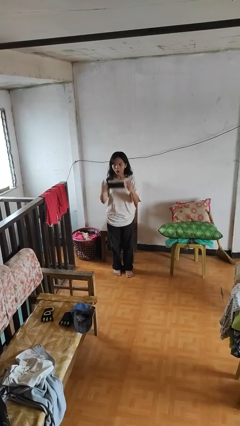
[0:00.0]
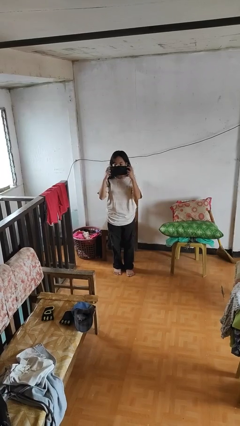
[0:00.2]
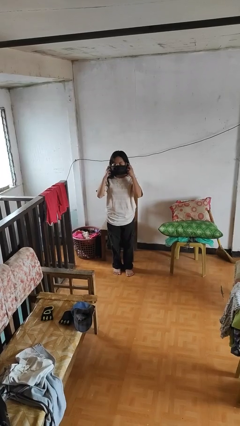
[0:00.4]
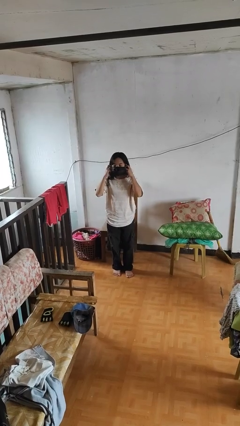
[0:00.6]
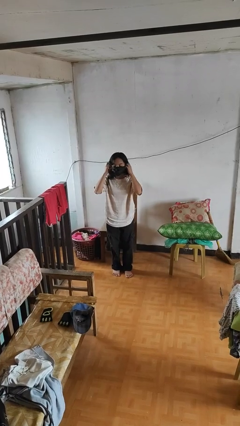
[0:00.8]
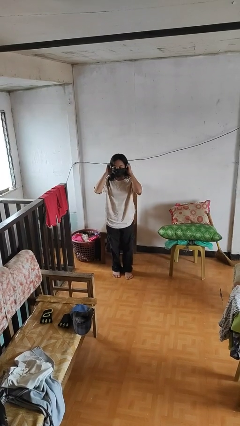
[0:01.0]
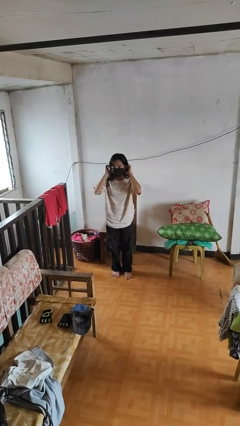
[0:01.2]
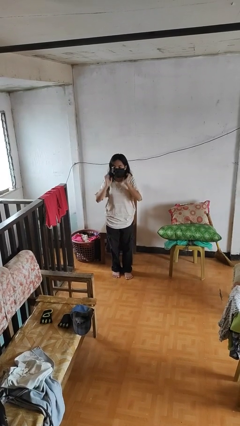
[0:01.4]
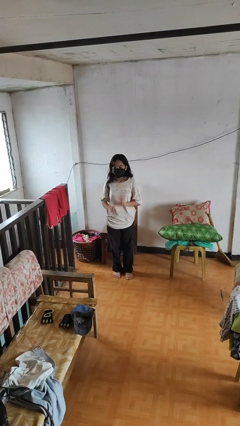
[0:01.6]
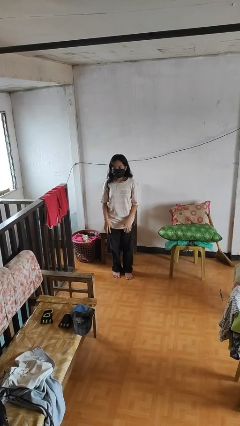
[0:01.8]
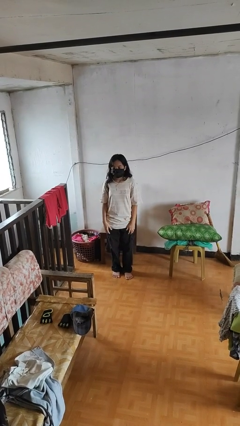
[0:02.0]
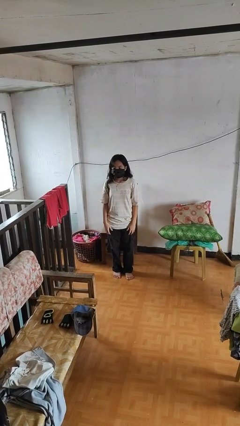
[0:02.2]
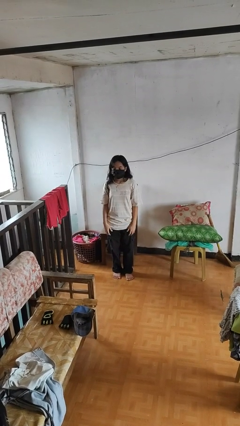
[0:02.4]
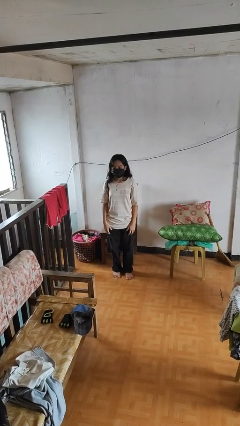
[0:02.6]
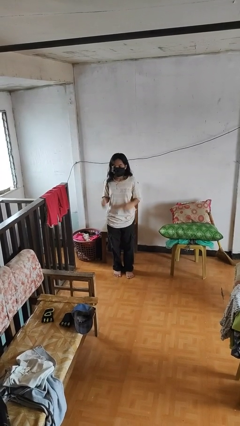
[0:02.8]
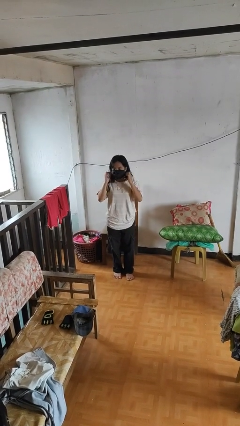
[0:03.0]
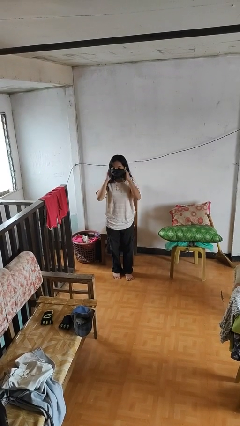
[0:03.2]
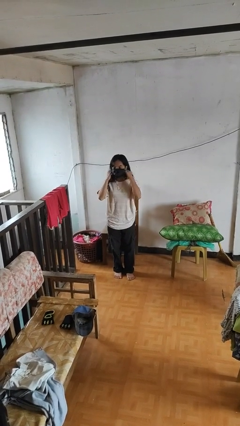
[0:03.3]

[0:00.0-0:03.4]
person puts on facemask

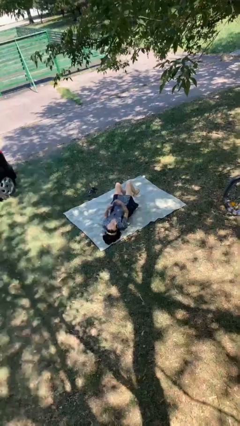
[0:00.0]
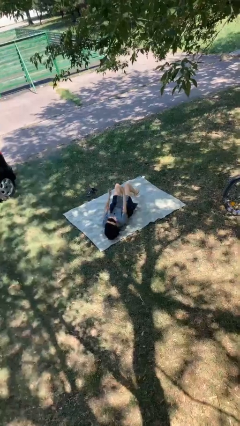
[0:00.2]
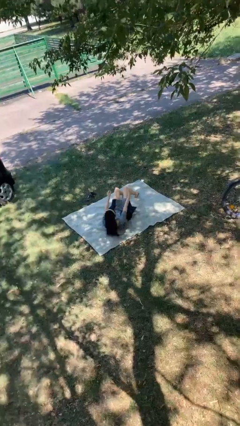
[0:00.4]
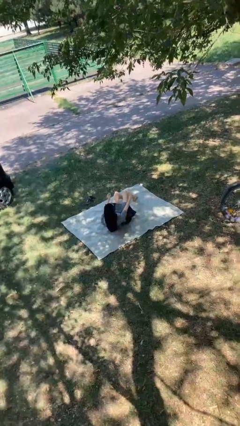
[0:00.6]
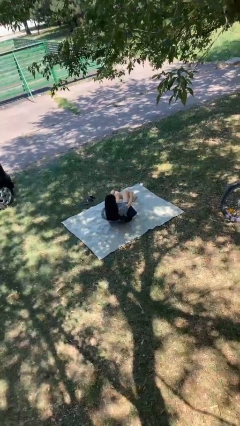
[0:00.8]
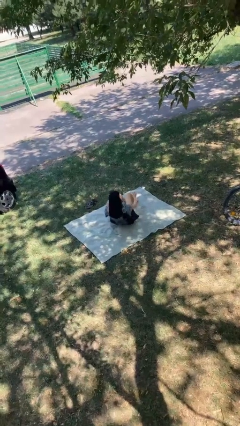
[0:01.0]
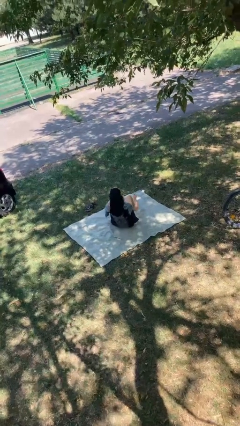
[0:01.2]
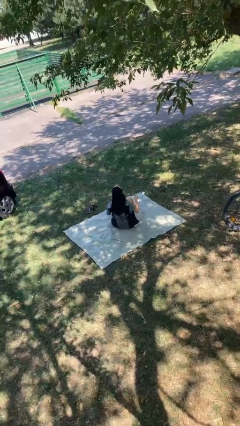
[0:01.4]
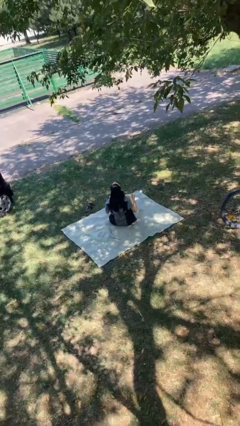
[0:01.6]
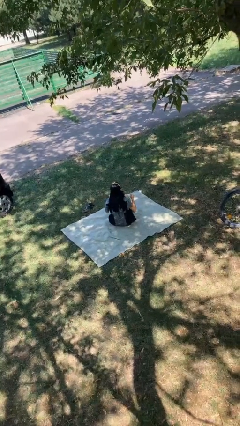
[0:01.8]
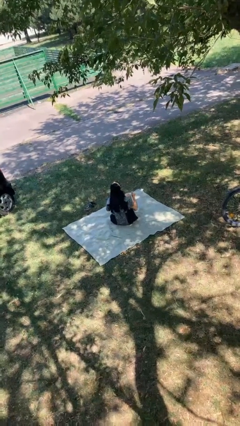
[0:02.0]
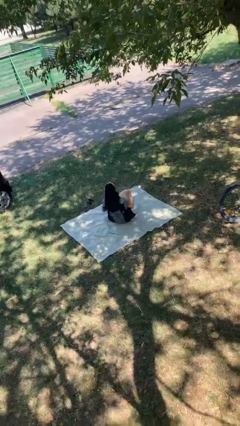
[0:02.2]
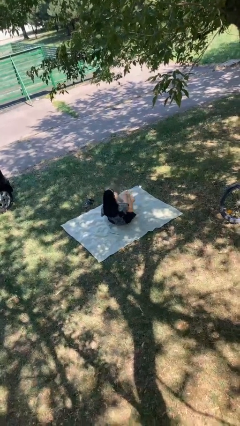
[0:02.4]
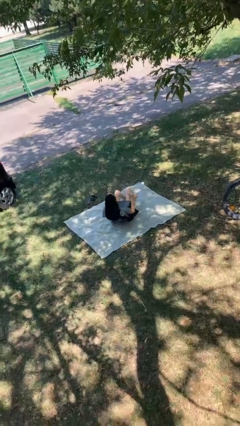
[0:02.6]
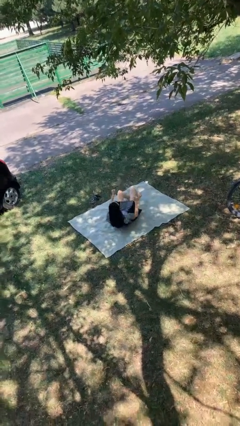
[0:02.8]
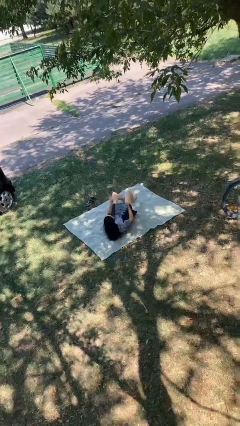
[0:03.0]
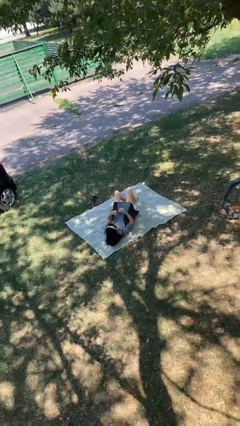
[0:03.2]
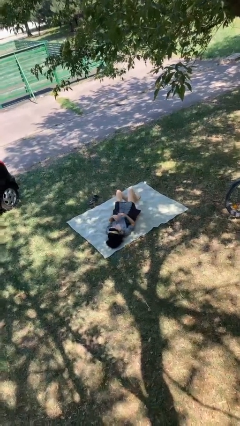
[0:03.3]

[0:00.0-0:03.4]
person exercises with situp

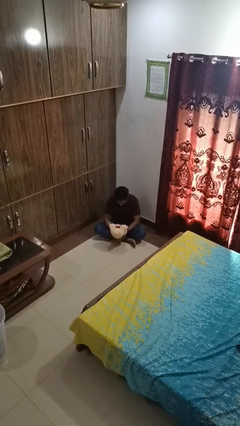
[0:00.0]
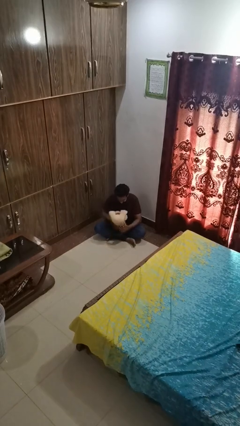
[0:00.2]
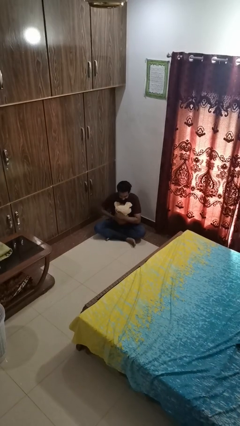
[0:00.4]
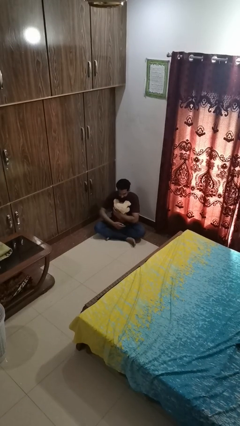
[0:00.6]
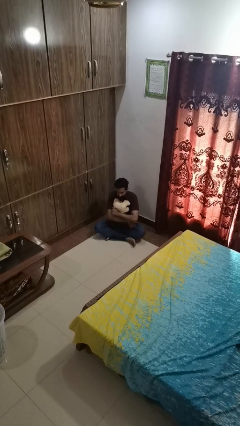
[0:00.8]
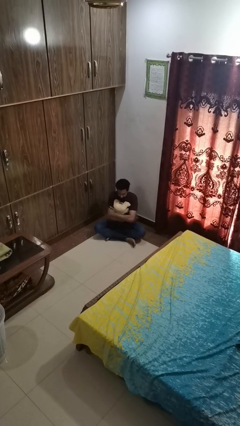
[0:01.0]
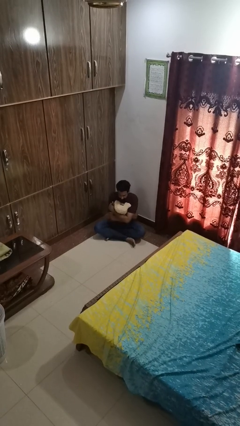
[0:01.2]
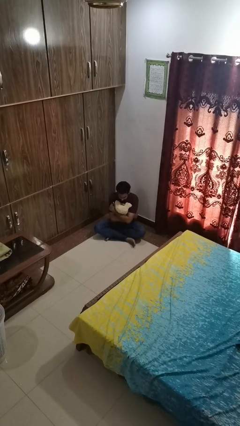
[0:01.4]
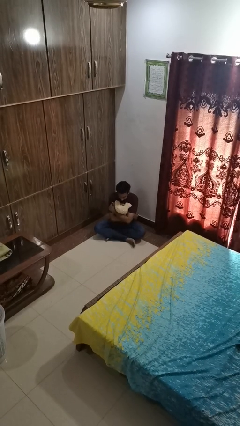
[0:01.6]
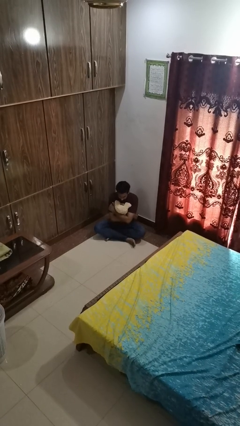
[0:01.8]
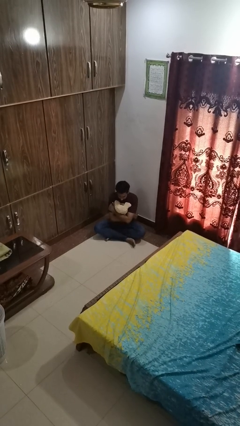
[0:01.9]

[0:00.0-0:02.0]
person hugs stuffed animal

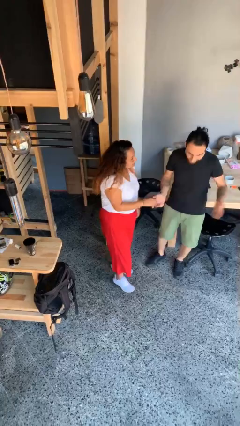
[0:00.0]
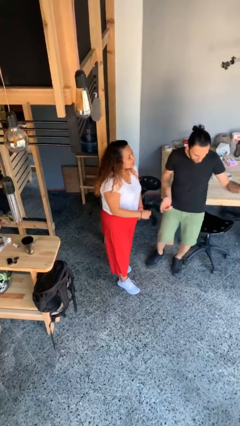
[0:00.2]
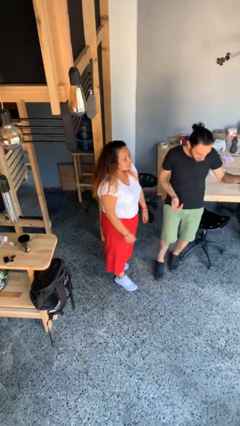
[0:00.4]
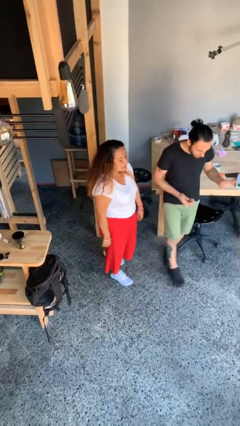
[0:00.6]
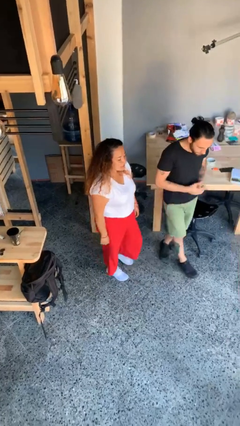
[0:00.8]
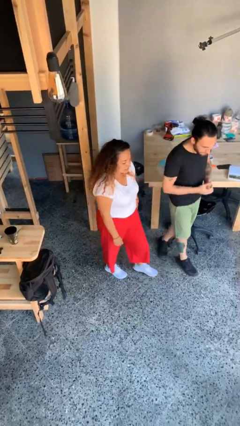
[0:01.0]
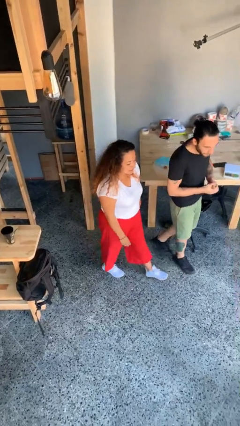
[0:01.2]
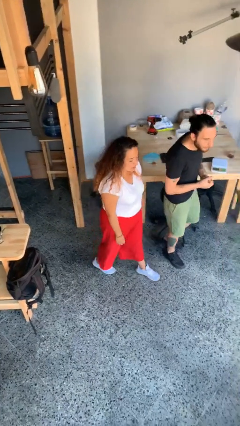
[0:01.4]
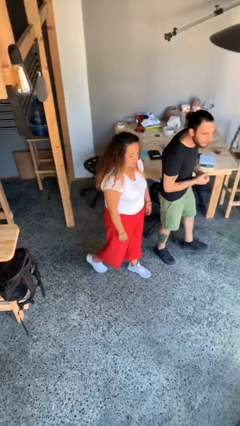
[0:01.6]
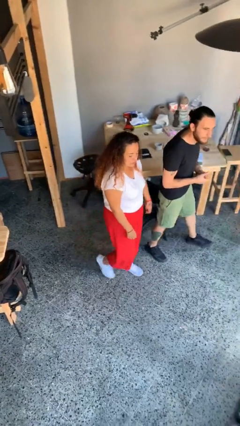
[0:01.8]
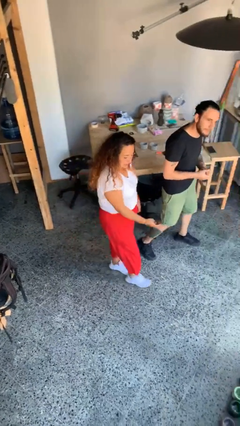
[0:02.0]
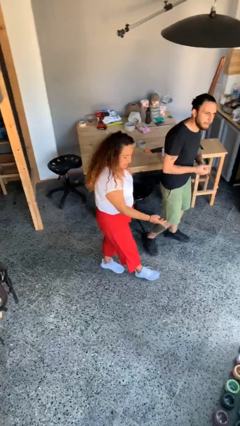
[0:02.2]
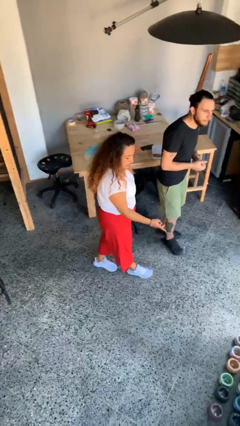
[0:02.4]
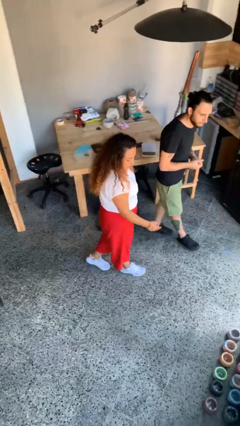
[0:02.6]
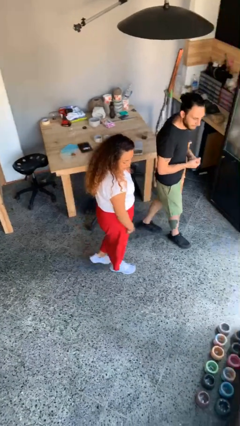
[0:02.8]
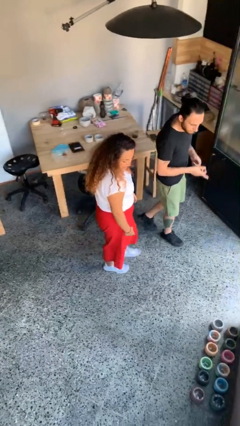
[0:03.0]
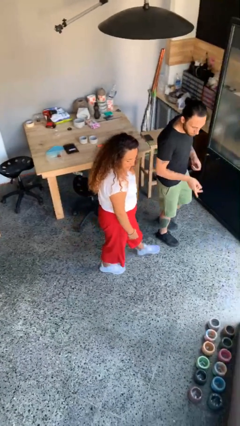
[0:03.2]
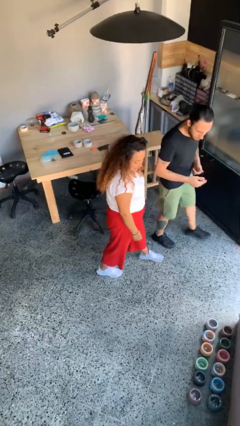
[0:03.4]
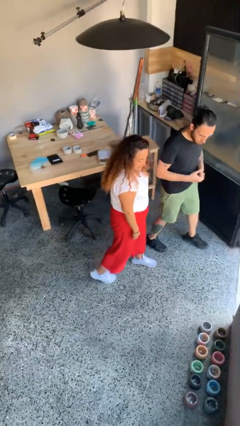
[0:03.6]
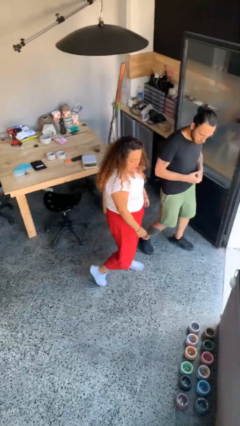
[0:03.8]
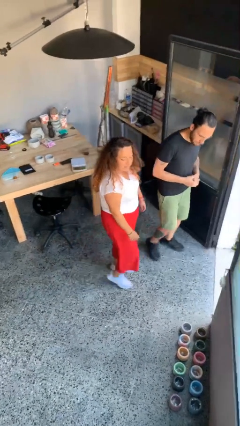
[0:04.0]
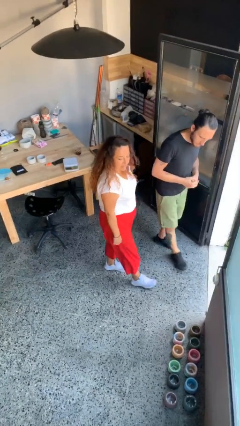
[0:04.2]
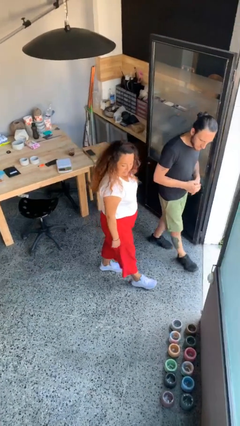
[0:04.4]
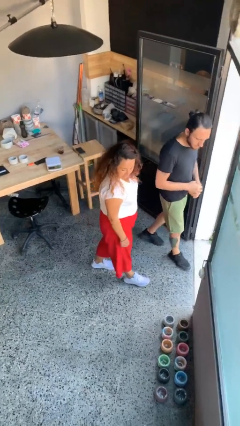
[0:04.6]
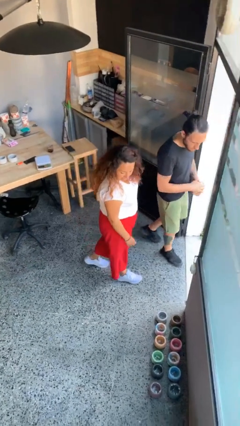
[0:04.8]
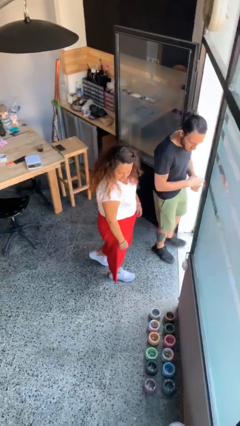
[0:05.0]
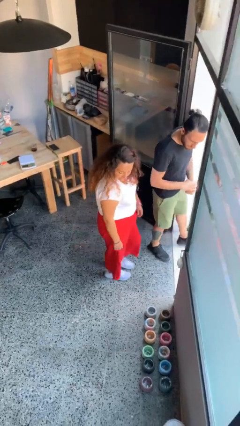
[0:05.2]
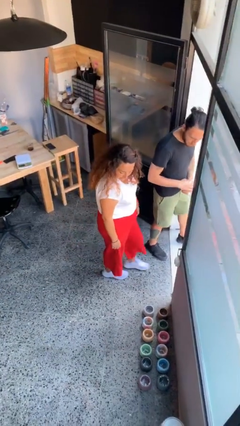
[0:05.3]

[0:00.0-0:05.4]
person talks to person

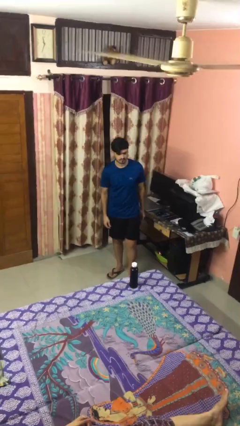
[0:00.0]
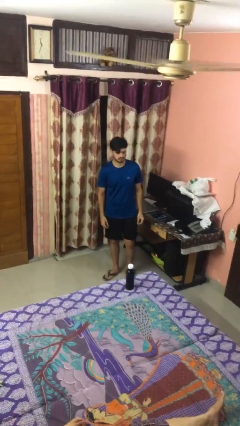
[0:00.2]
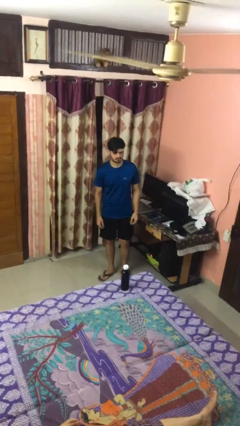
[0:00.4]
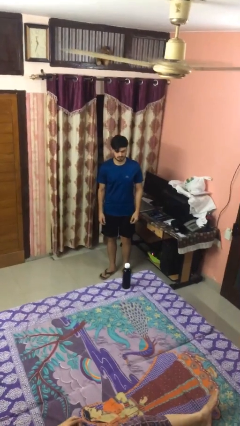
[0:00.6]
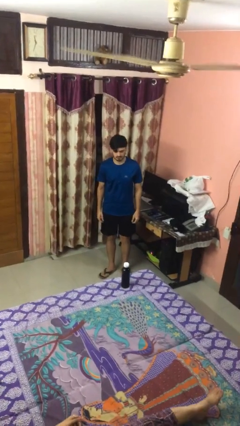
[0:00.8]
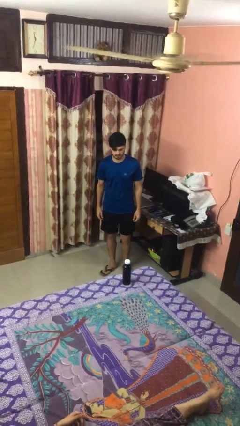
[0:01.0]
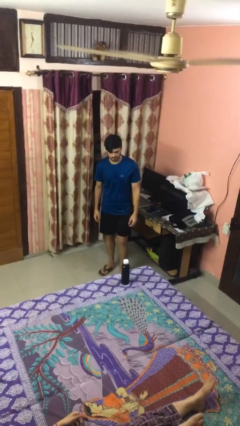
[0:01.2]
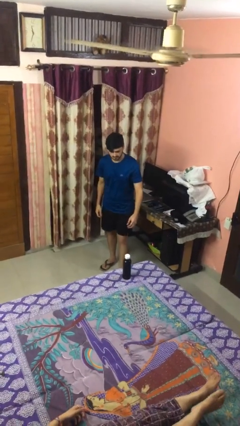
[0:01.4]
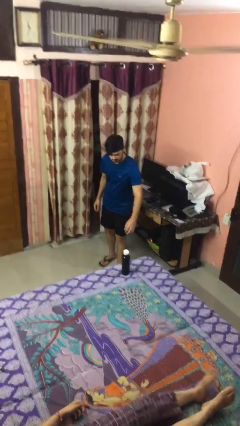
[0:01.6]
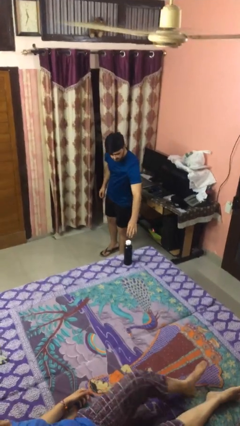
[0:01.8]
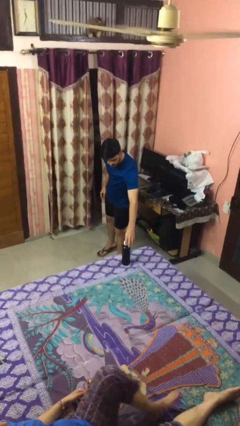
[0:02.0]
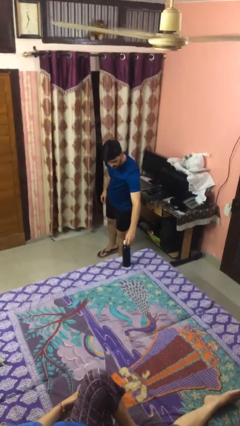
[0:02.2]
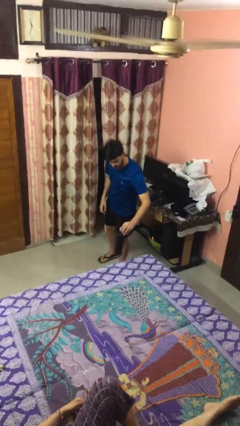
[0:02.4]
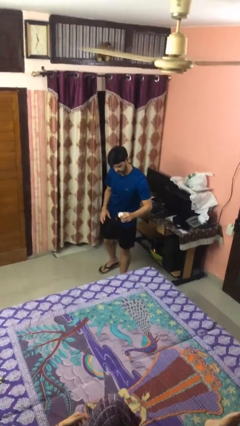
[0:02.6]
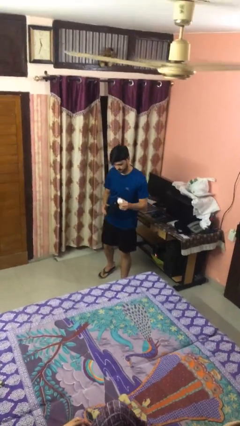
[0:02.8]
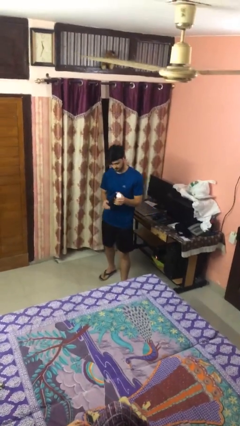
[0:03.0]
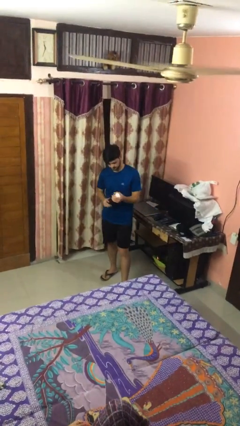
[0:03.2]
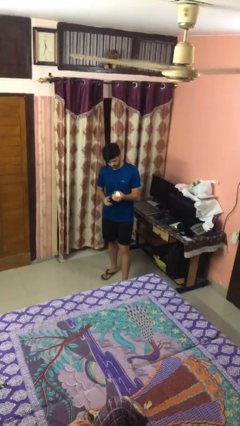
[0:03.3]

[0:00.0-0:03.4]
person picks up object from bed
